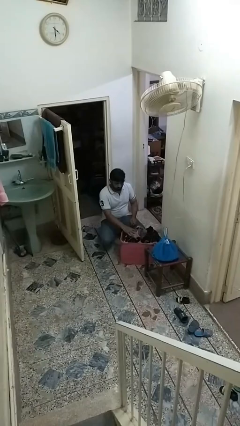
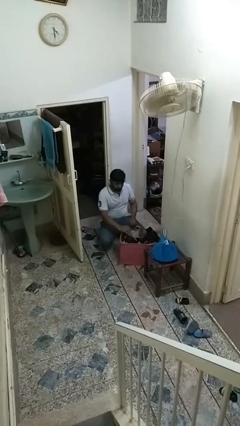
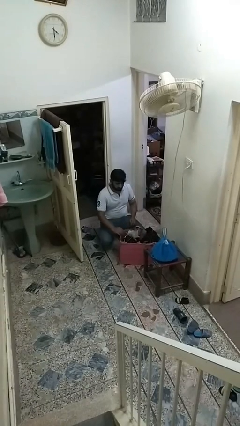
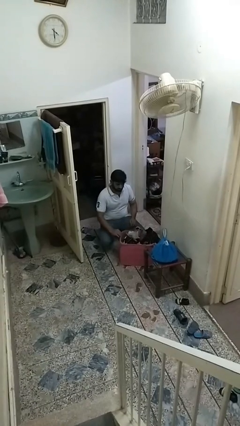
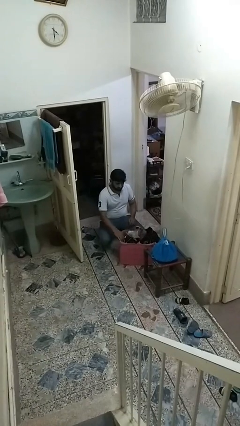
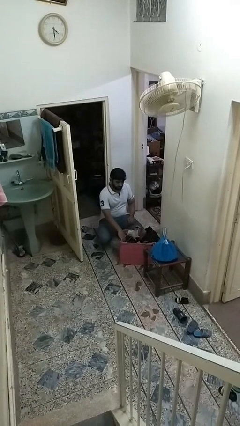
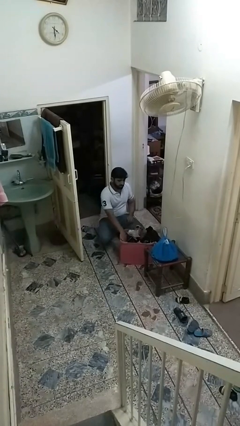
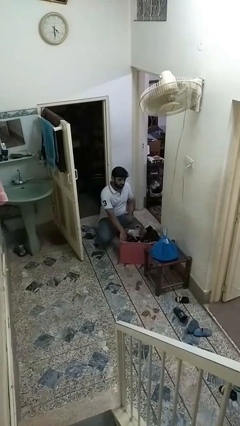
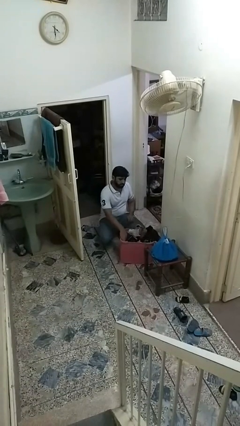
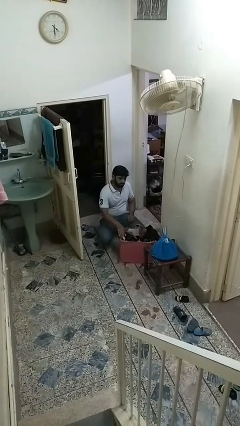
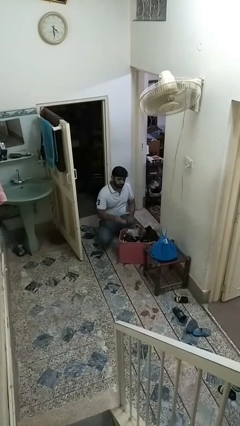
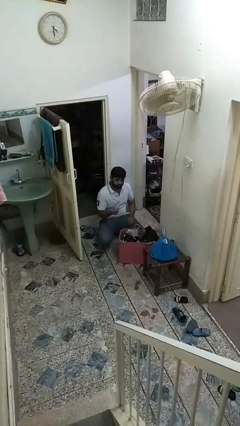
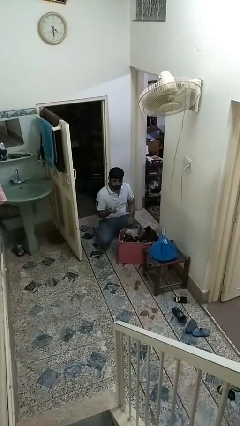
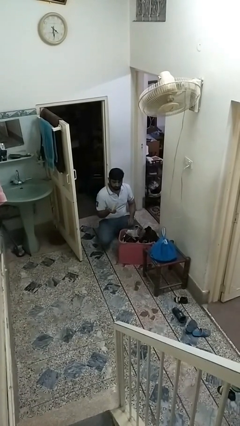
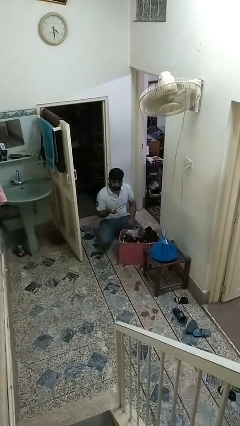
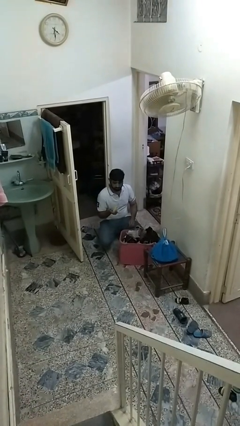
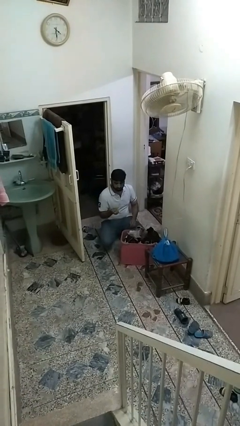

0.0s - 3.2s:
person takes object from basket

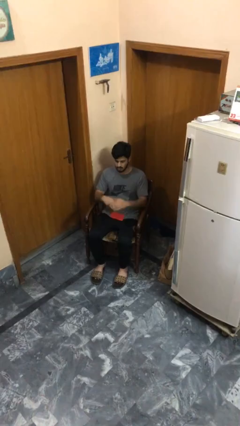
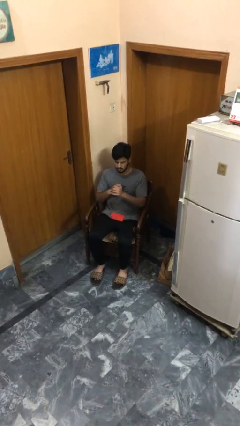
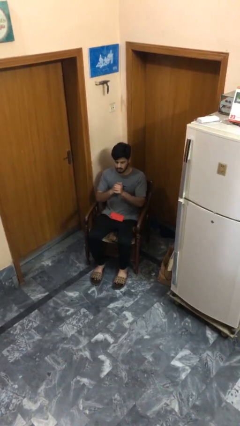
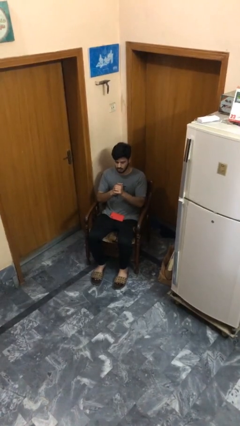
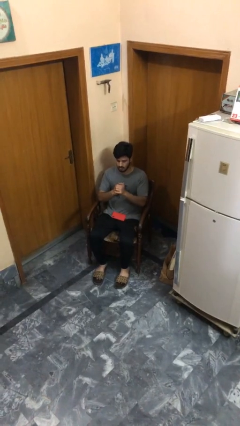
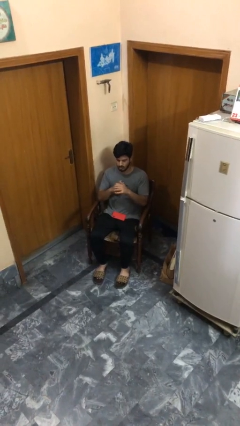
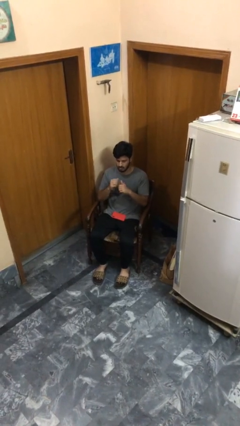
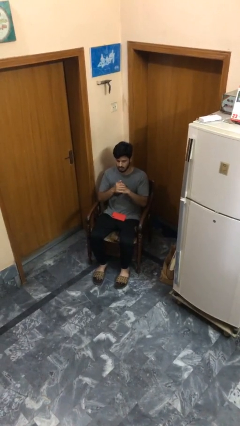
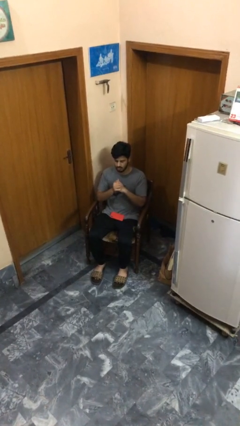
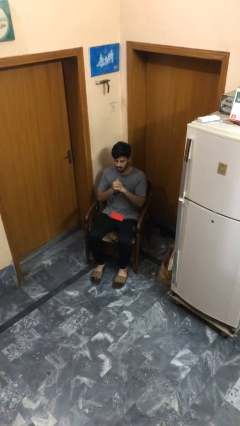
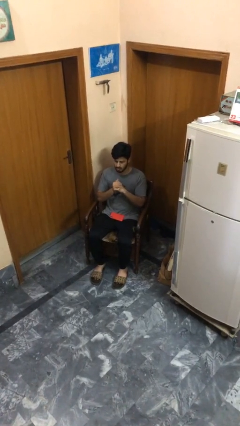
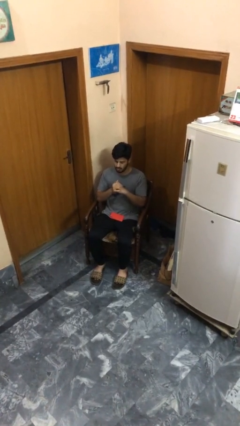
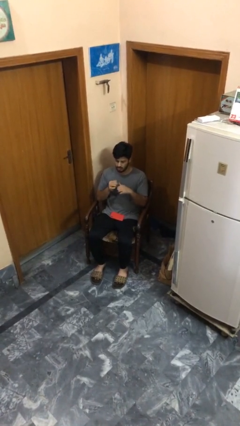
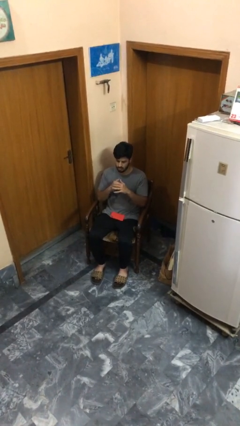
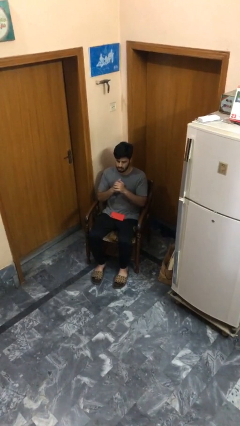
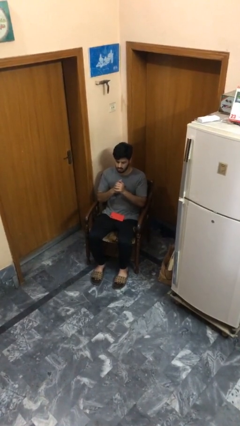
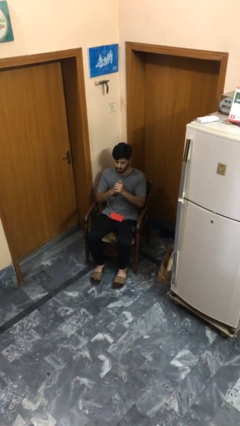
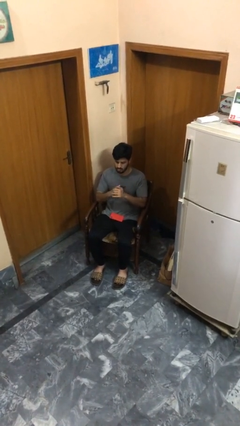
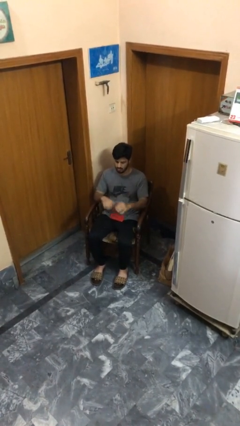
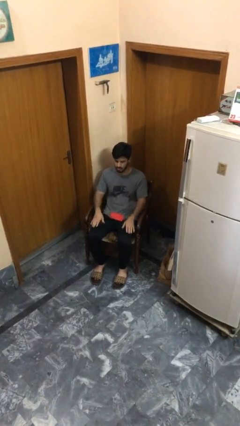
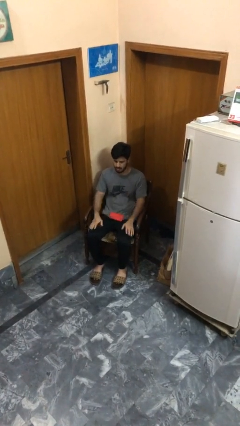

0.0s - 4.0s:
person cracks knuckles

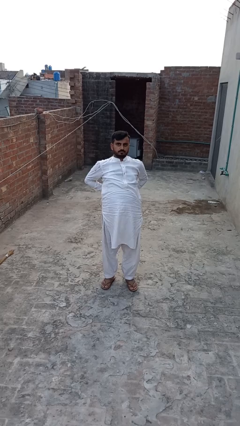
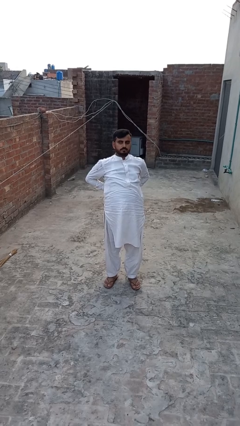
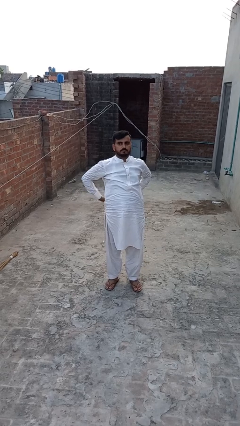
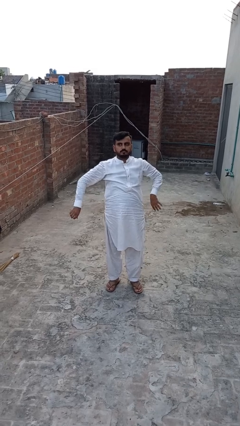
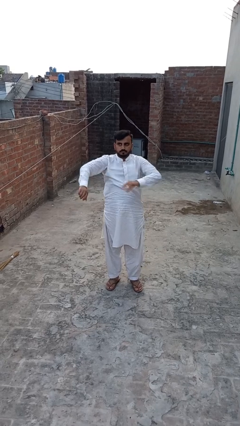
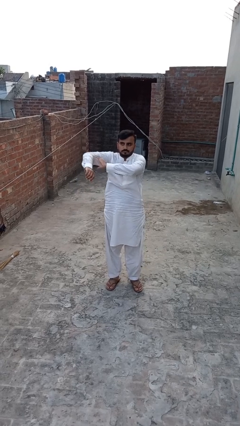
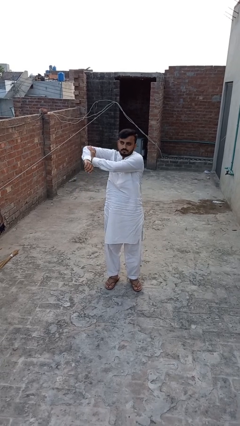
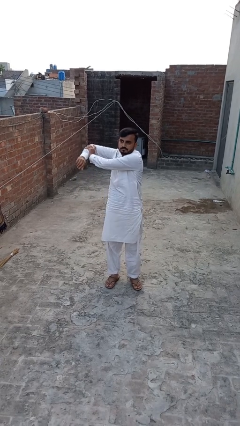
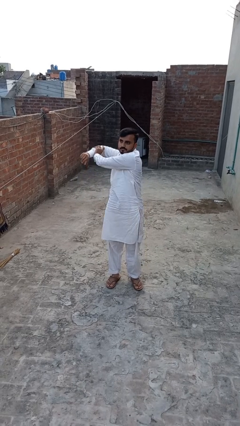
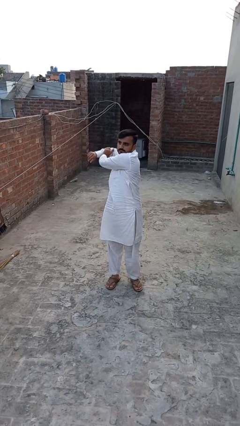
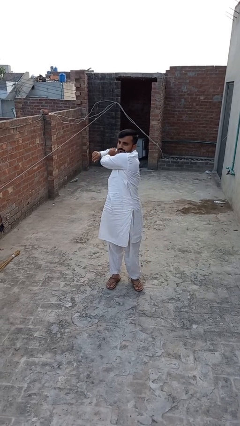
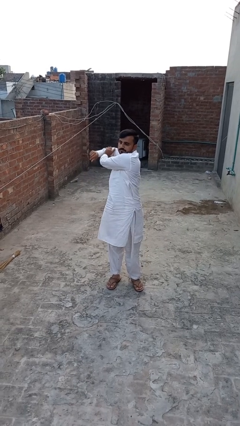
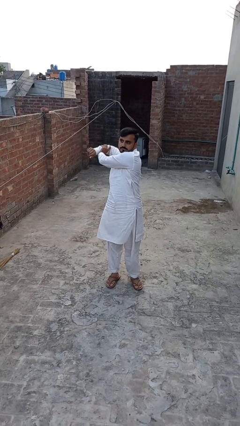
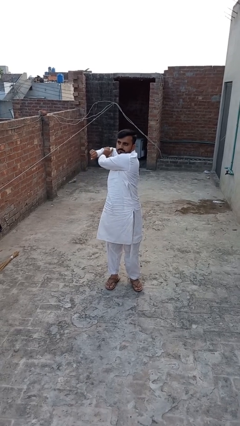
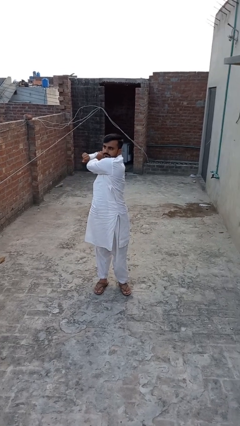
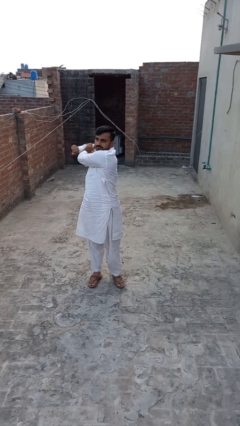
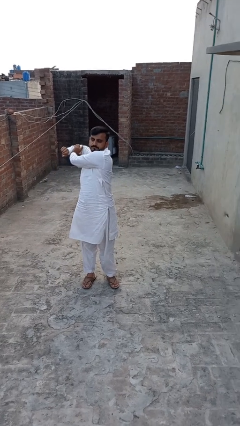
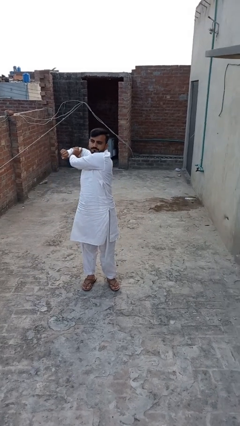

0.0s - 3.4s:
person stretches arms to side

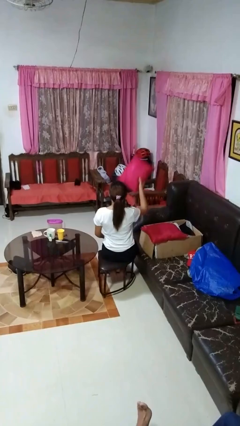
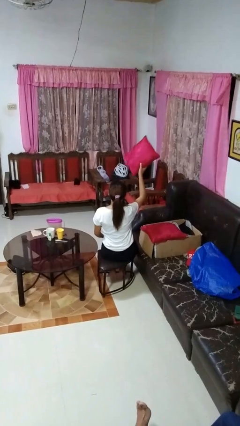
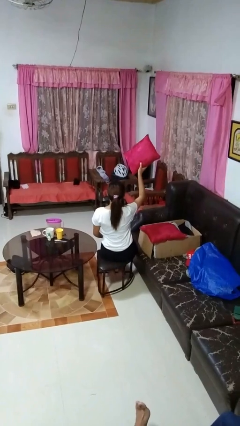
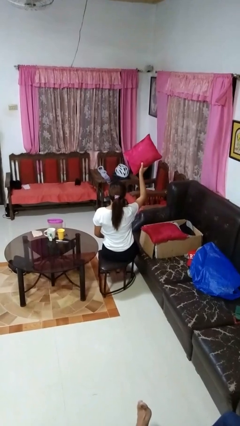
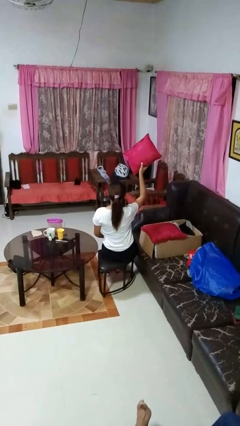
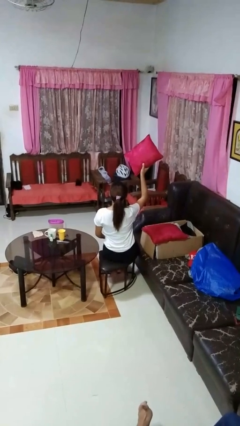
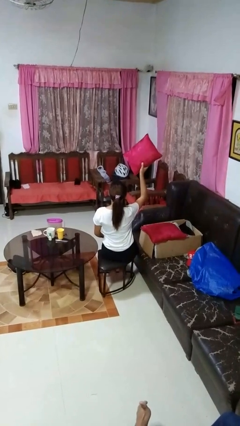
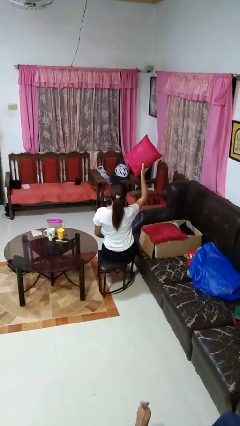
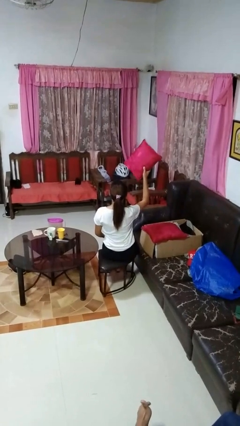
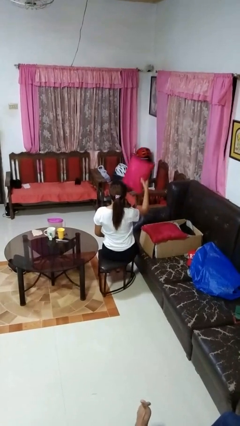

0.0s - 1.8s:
person holds object above head

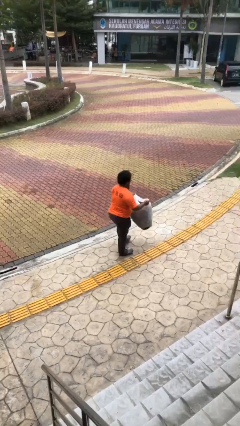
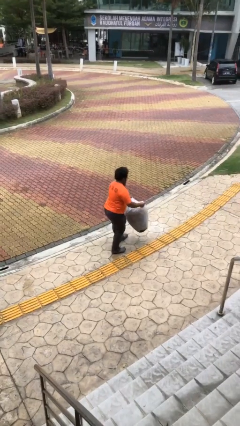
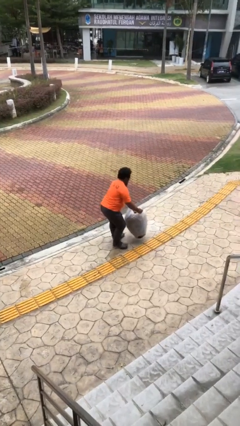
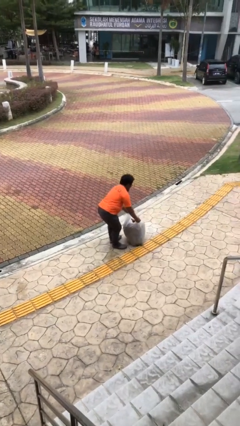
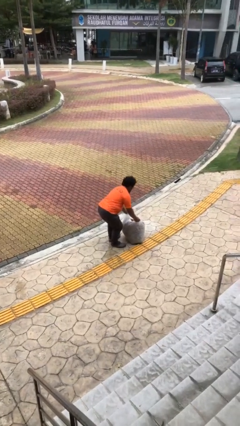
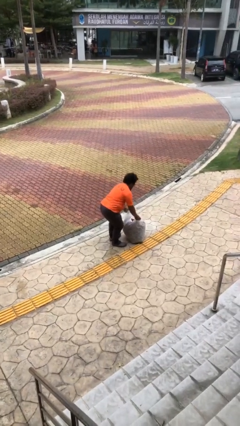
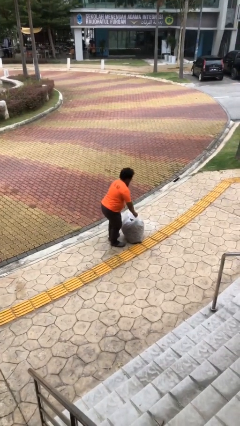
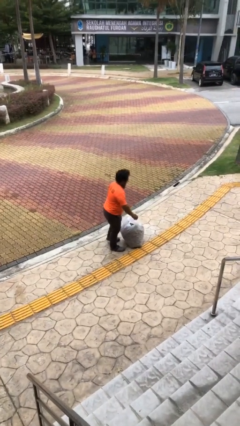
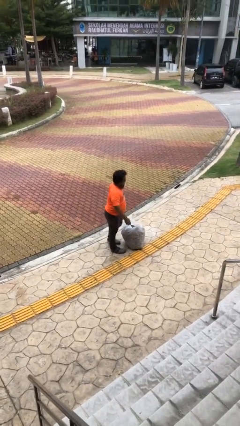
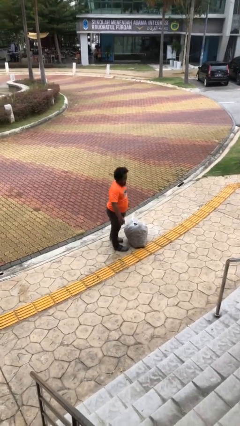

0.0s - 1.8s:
person puts down object on floor

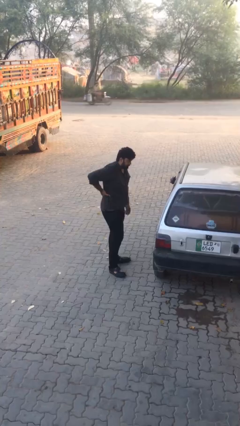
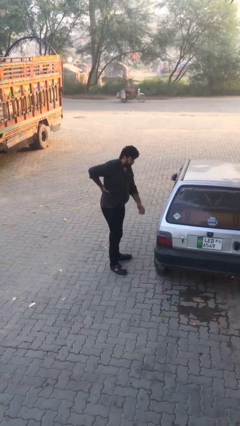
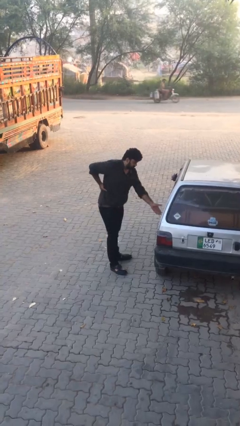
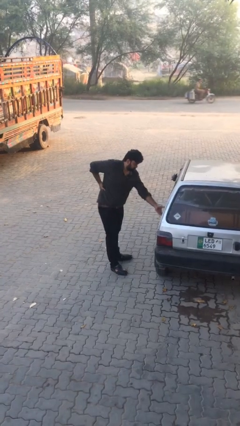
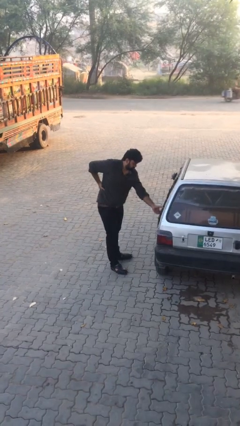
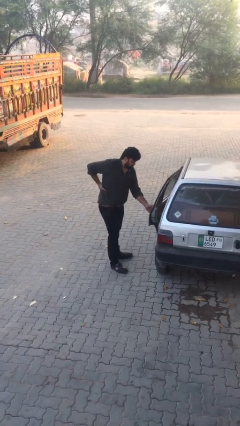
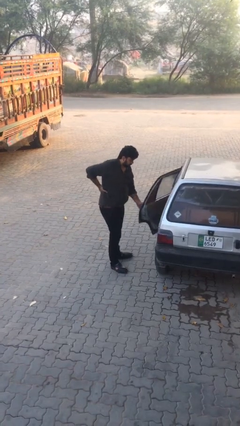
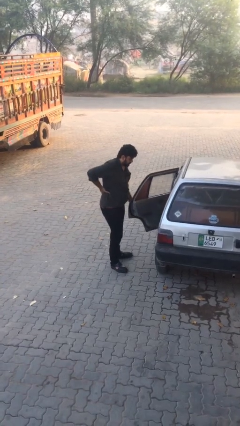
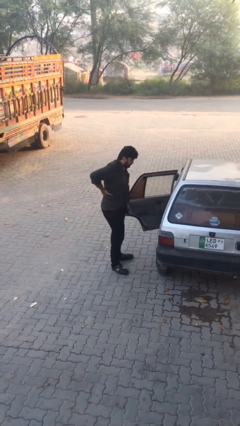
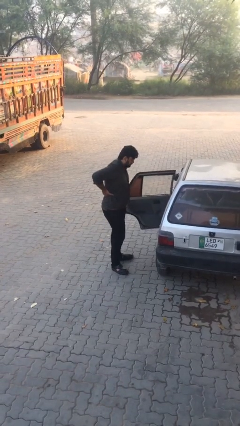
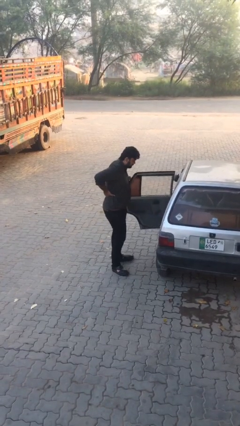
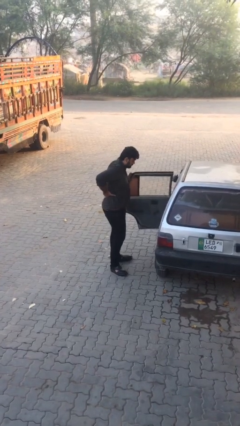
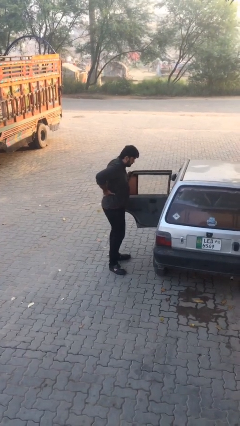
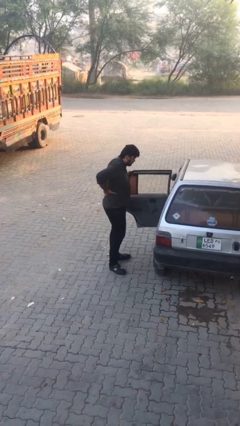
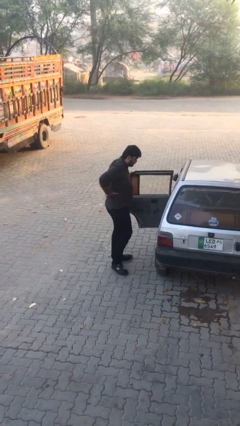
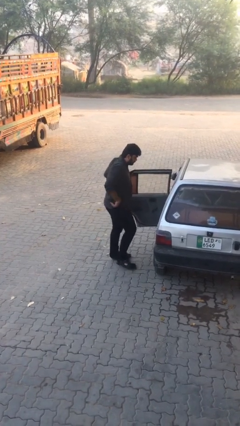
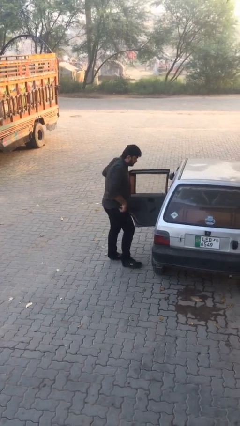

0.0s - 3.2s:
person opens car door

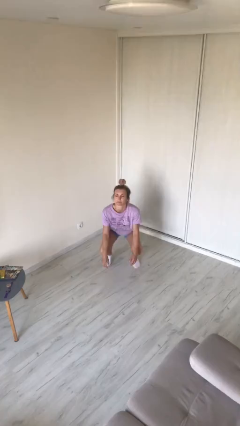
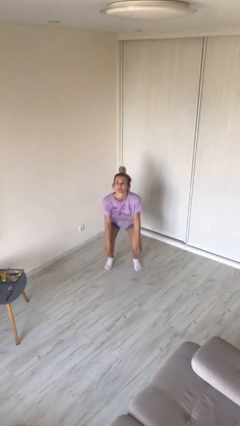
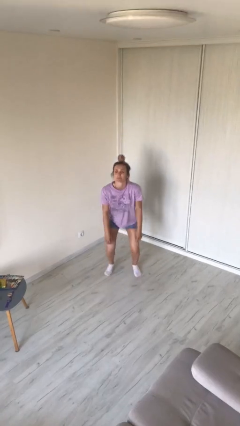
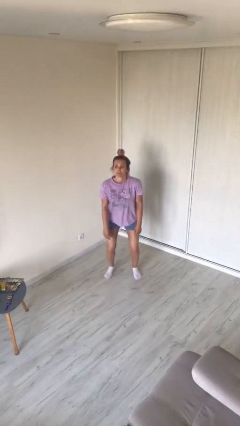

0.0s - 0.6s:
person stands up
